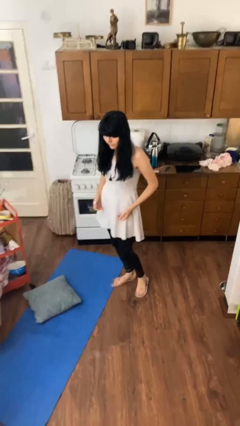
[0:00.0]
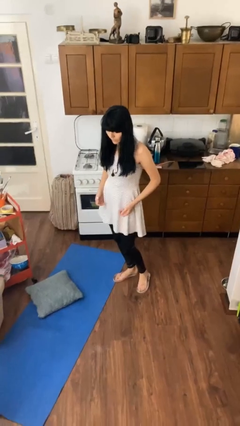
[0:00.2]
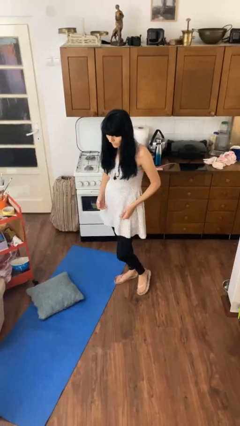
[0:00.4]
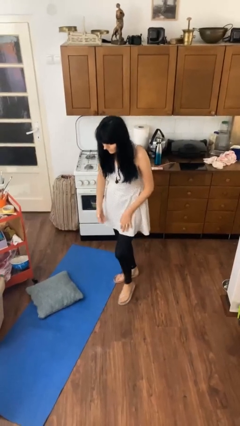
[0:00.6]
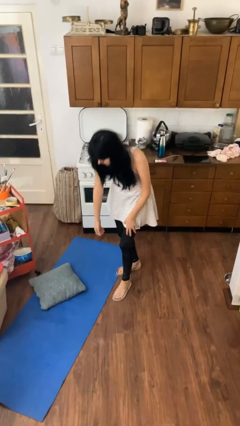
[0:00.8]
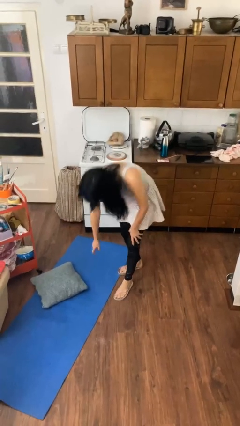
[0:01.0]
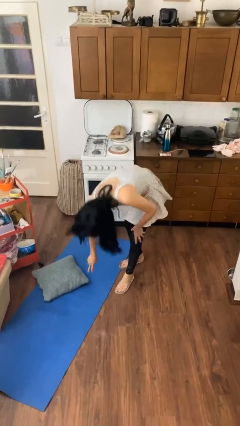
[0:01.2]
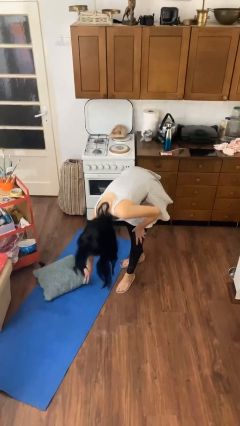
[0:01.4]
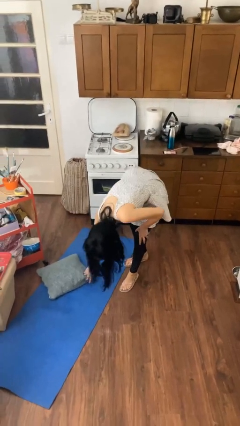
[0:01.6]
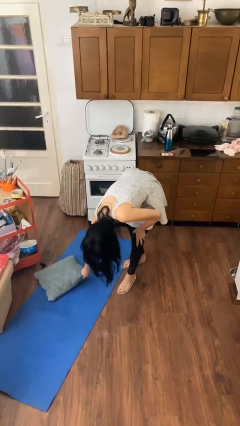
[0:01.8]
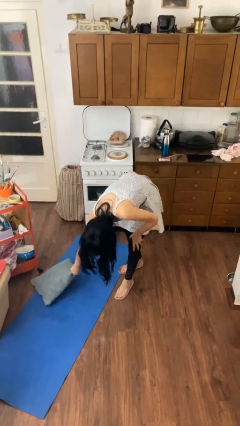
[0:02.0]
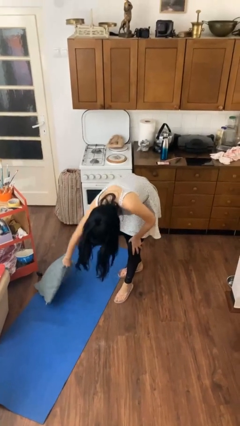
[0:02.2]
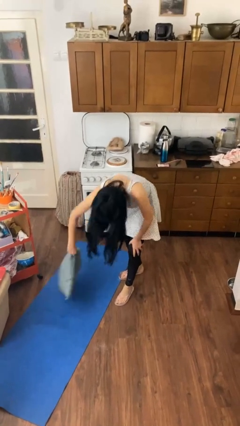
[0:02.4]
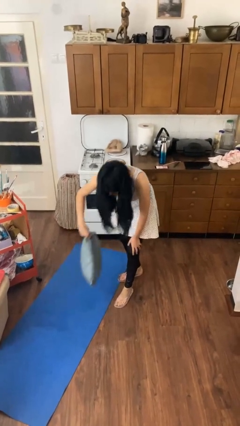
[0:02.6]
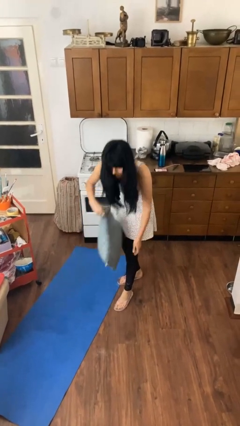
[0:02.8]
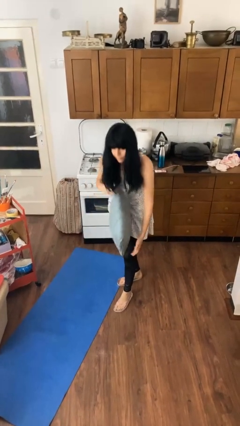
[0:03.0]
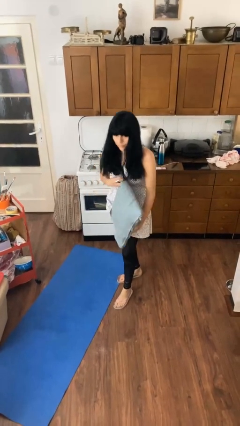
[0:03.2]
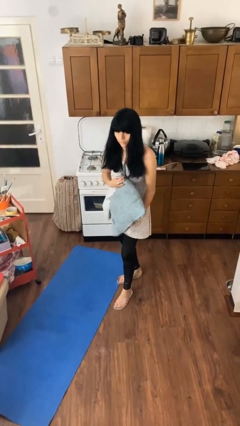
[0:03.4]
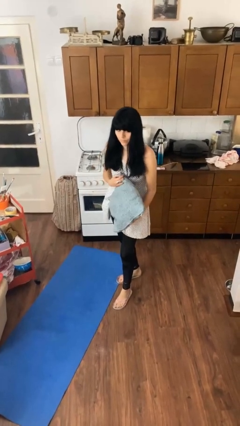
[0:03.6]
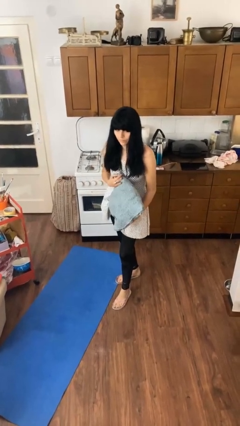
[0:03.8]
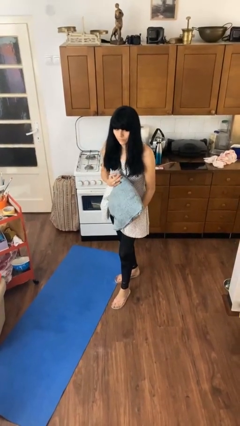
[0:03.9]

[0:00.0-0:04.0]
person picks up object from floor

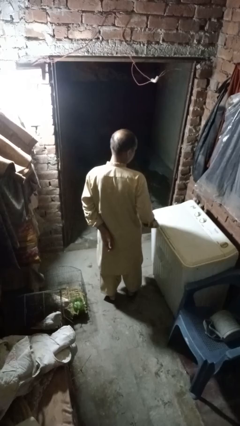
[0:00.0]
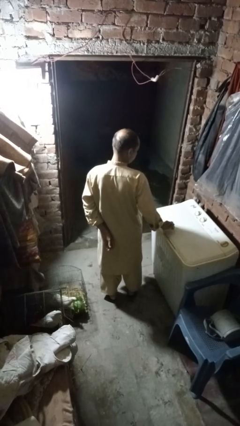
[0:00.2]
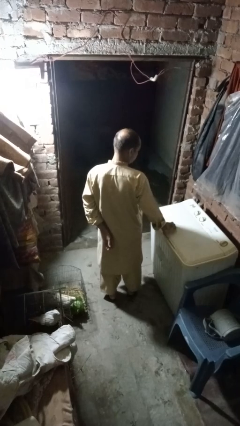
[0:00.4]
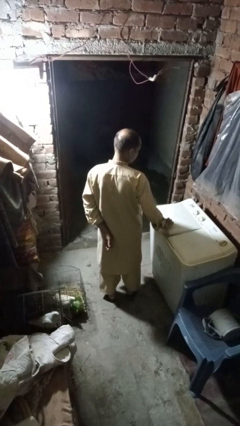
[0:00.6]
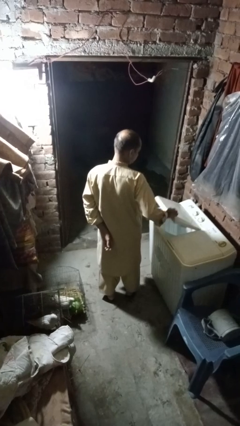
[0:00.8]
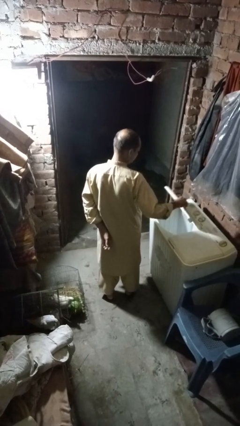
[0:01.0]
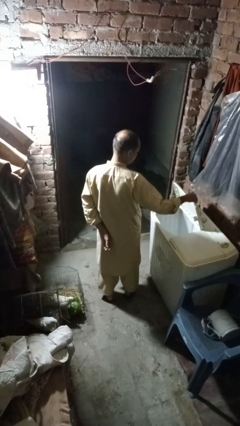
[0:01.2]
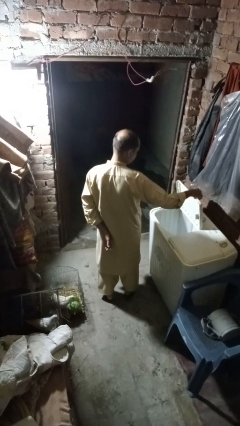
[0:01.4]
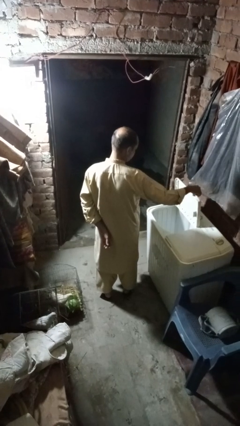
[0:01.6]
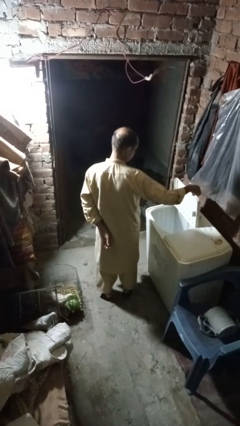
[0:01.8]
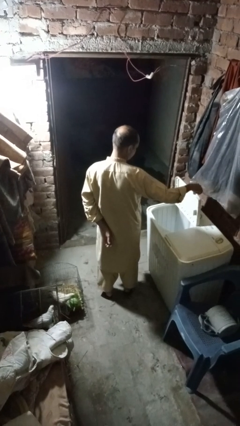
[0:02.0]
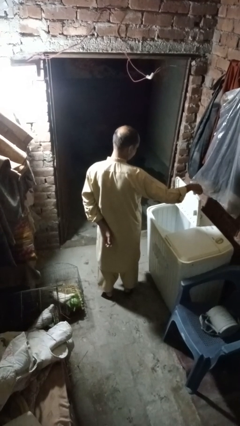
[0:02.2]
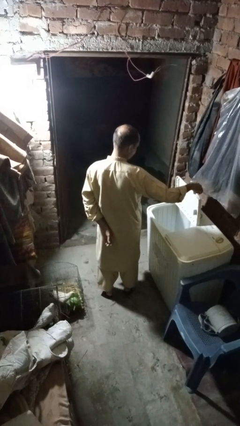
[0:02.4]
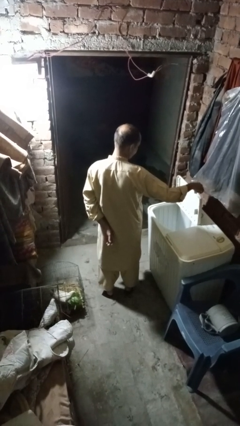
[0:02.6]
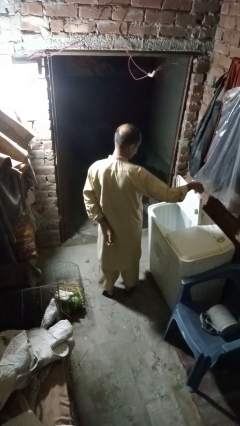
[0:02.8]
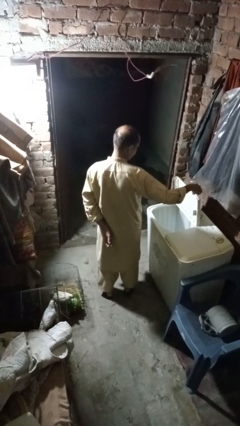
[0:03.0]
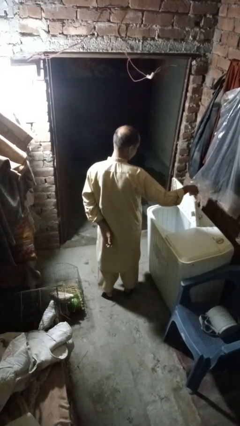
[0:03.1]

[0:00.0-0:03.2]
person opens clothes washer

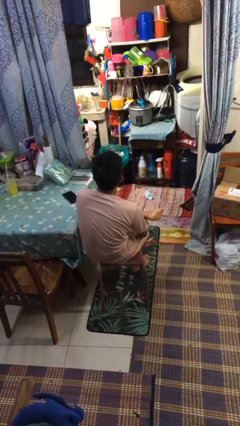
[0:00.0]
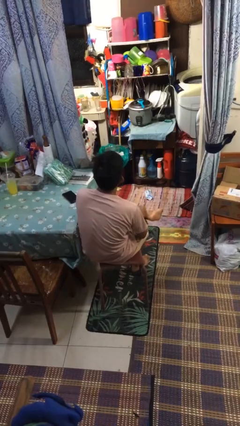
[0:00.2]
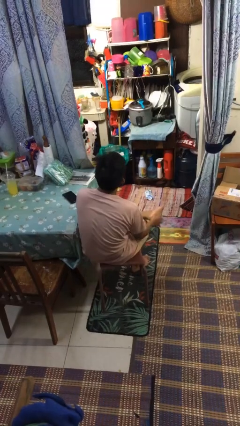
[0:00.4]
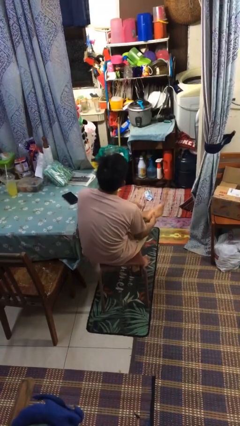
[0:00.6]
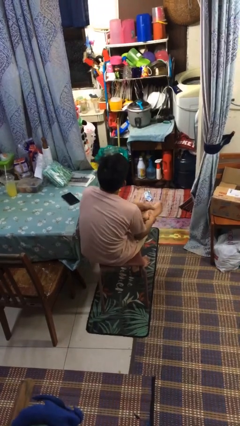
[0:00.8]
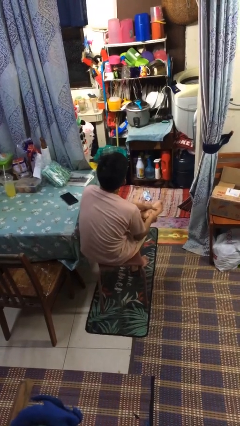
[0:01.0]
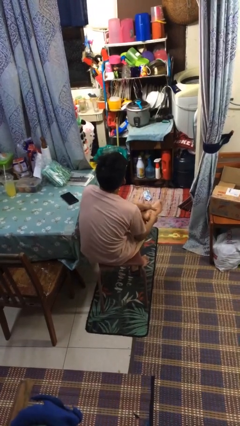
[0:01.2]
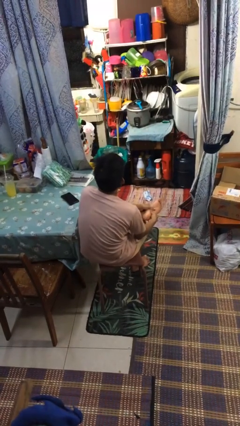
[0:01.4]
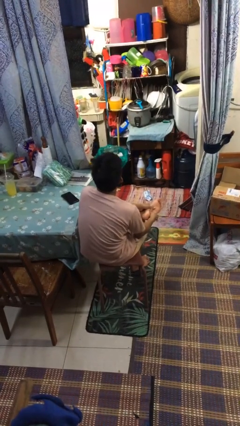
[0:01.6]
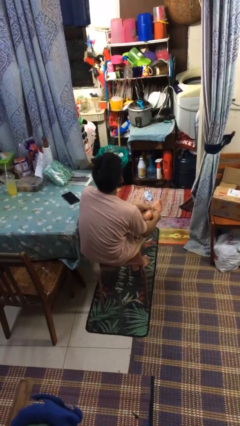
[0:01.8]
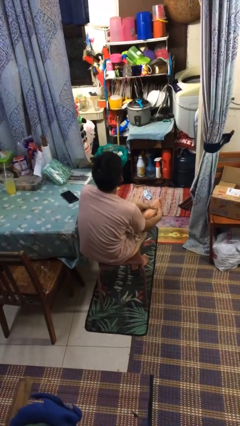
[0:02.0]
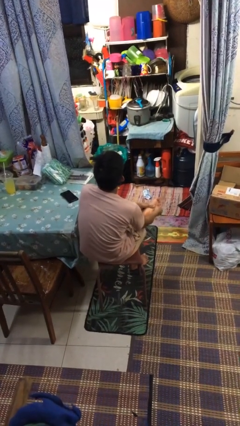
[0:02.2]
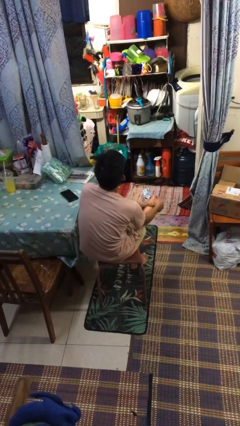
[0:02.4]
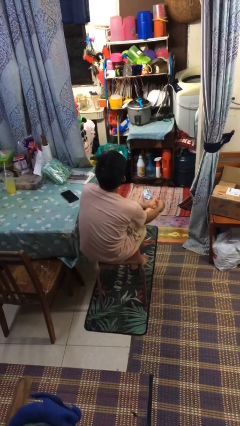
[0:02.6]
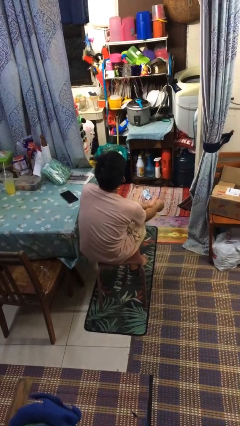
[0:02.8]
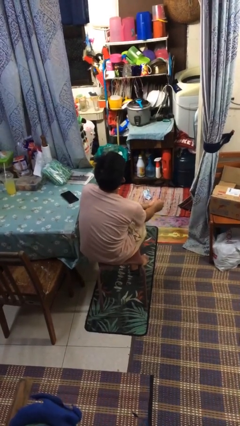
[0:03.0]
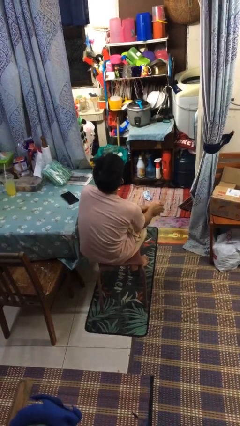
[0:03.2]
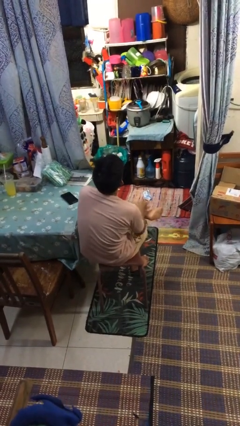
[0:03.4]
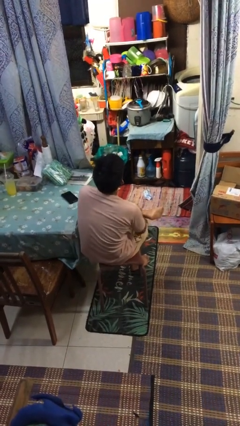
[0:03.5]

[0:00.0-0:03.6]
person rubs foot

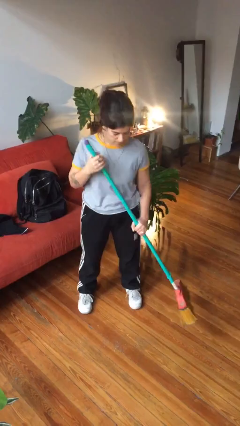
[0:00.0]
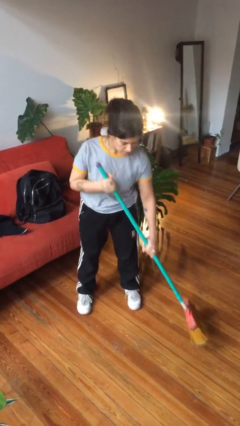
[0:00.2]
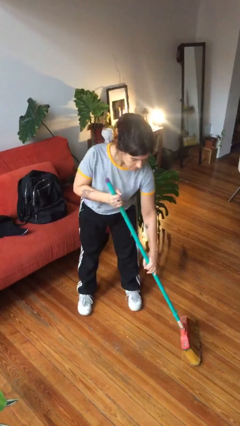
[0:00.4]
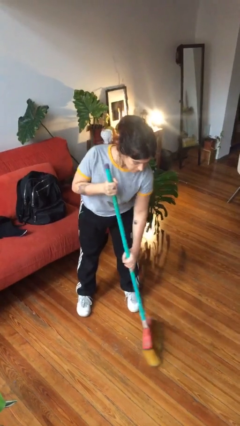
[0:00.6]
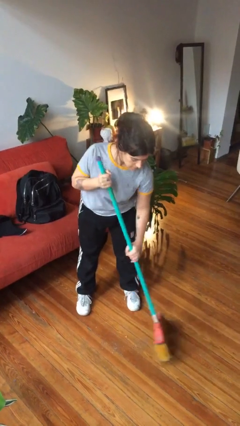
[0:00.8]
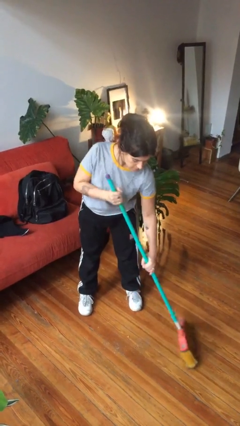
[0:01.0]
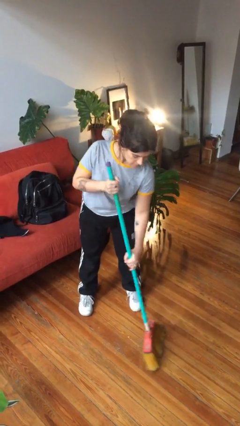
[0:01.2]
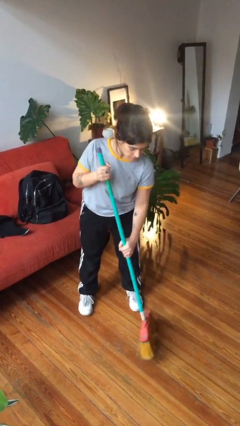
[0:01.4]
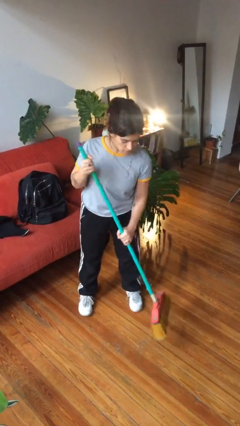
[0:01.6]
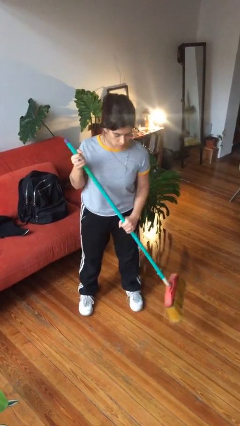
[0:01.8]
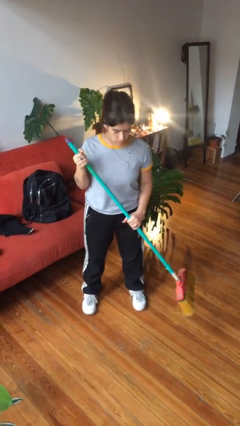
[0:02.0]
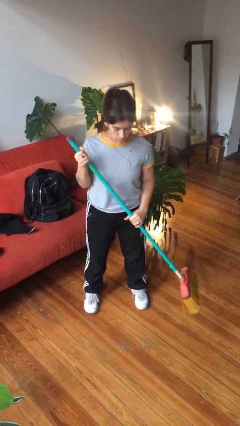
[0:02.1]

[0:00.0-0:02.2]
person sweeps floor

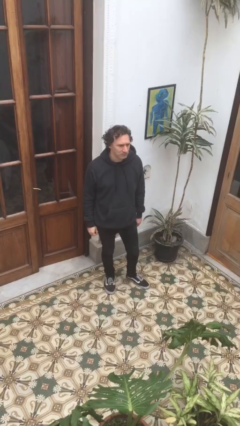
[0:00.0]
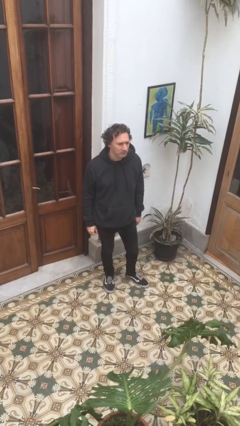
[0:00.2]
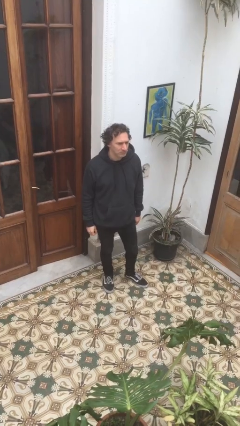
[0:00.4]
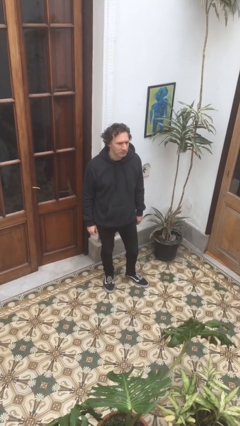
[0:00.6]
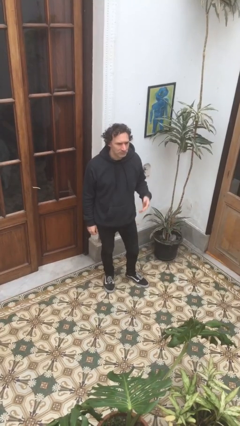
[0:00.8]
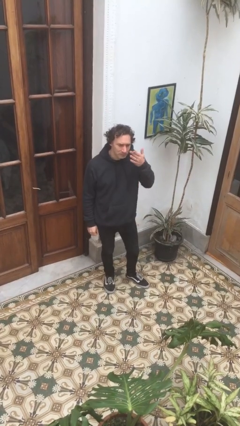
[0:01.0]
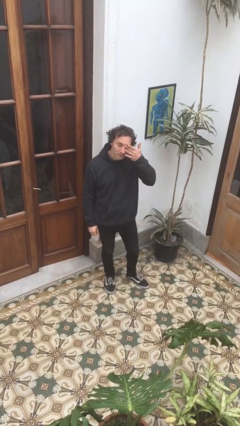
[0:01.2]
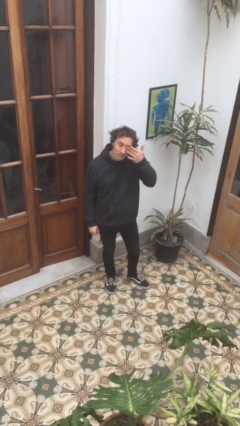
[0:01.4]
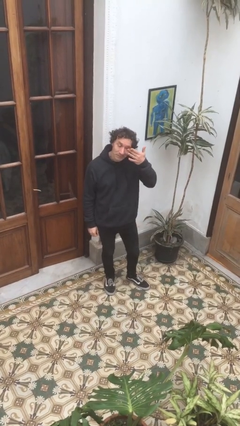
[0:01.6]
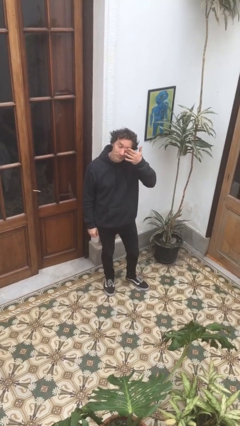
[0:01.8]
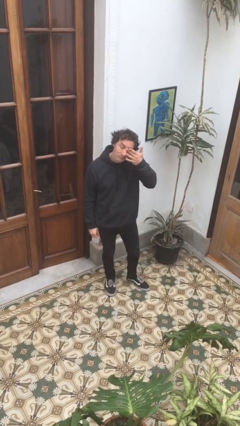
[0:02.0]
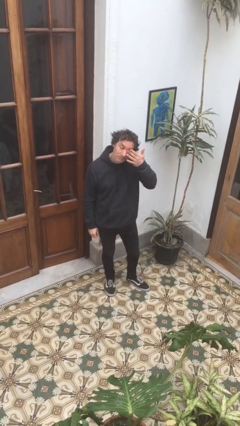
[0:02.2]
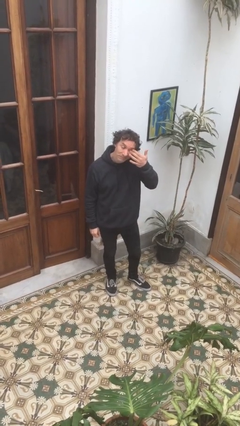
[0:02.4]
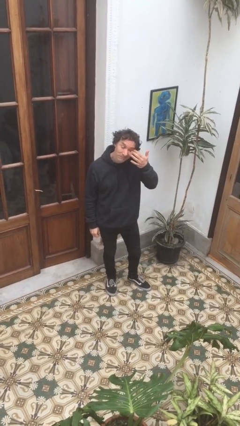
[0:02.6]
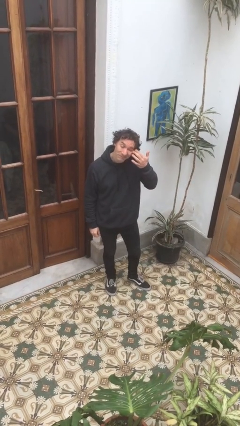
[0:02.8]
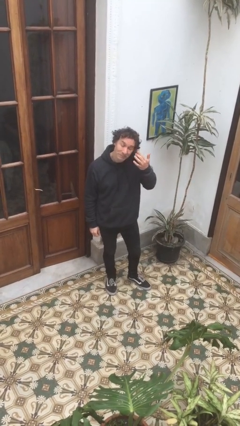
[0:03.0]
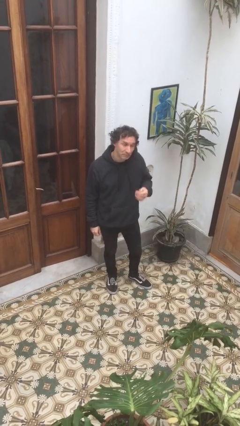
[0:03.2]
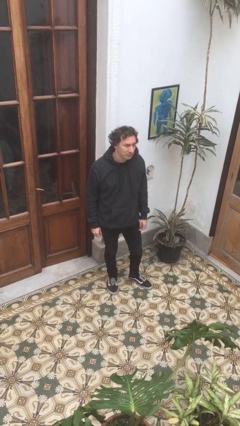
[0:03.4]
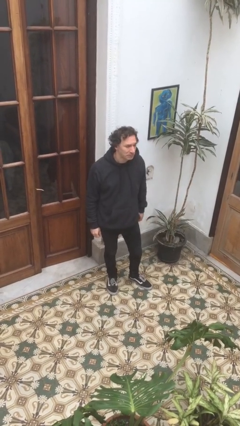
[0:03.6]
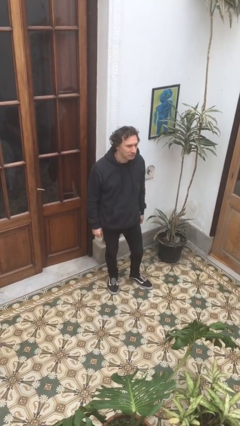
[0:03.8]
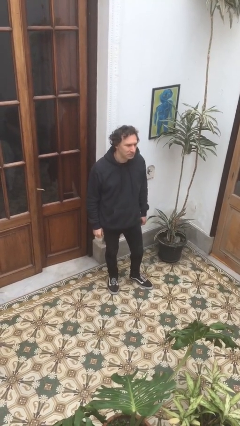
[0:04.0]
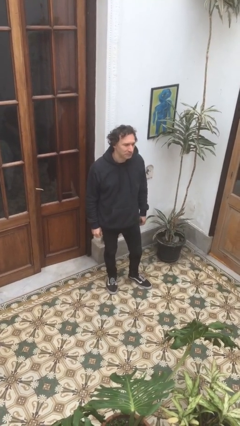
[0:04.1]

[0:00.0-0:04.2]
person rubs eyes
